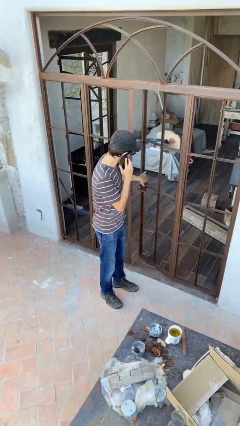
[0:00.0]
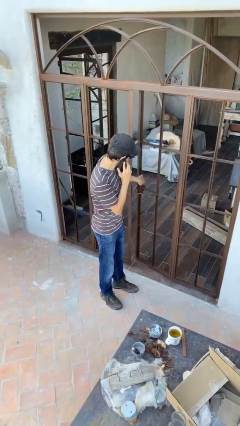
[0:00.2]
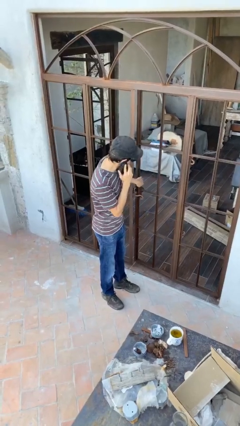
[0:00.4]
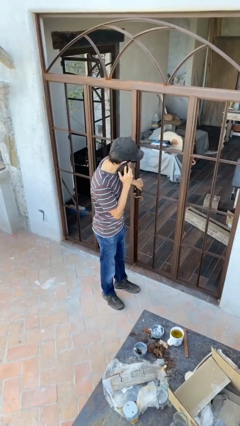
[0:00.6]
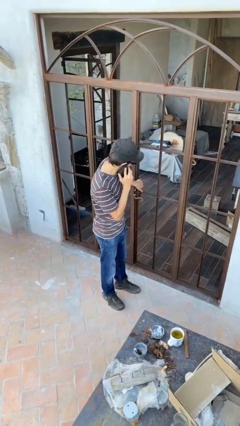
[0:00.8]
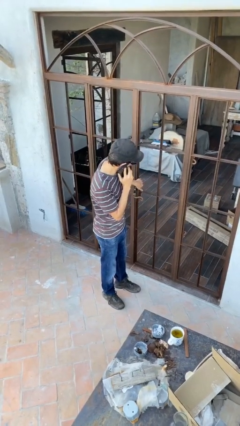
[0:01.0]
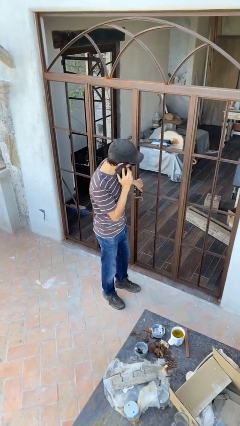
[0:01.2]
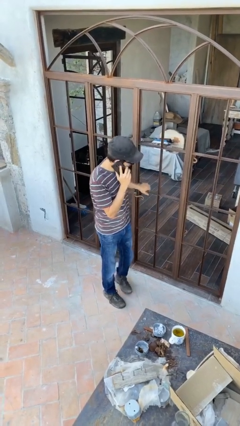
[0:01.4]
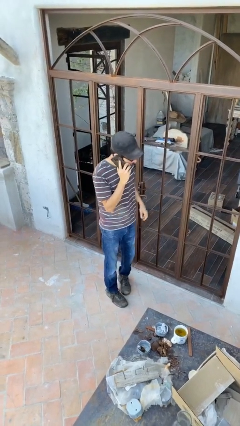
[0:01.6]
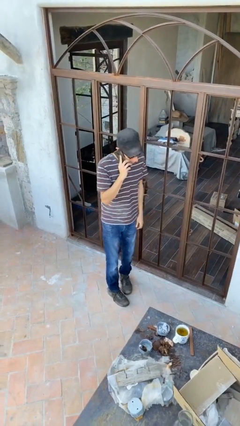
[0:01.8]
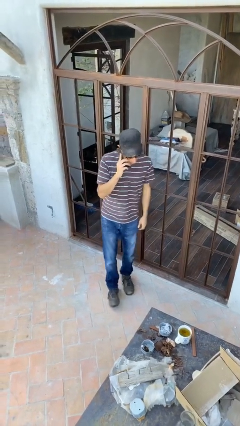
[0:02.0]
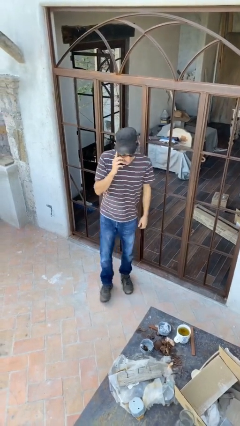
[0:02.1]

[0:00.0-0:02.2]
person closes facility door

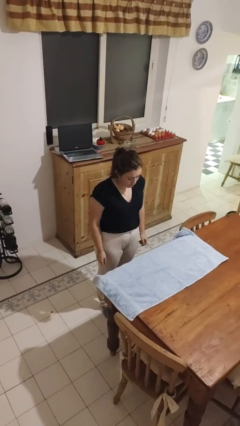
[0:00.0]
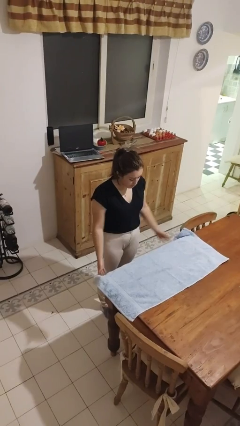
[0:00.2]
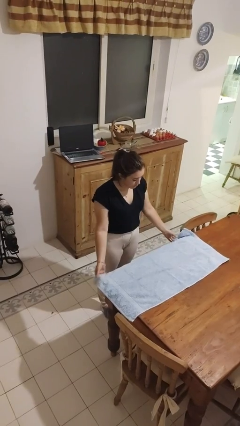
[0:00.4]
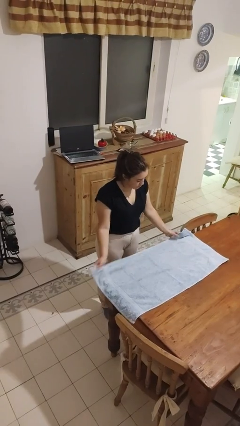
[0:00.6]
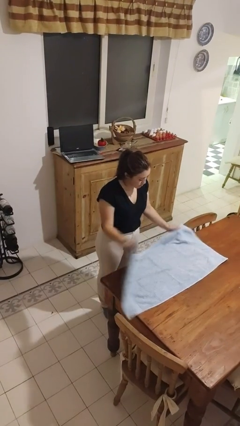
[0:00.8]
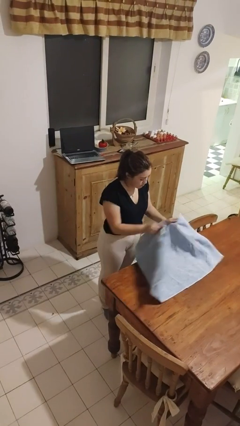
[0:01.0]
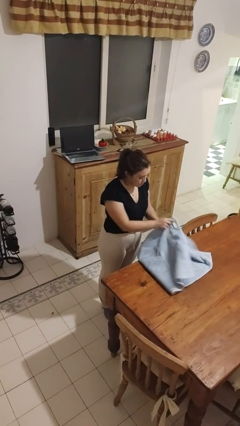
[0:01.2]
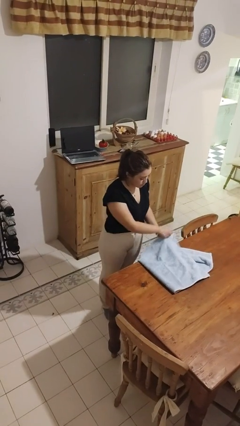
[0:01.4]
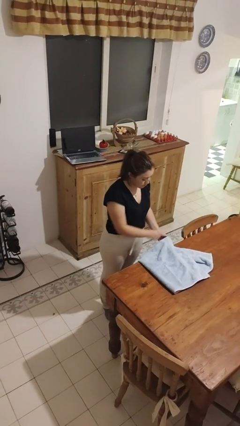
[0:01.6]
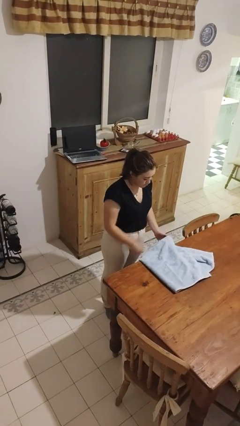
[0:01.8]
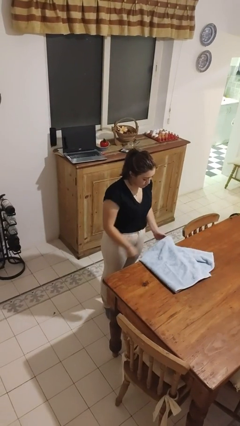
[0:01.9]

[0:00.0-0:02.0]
person folds tablecloth

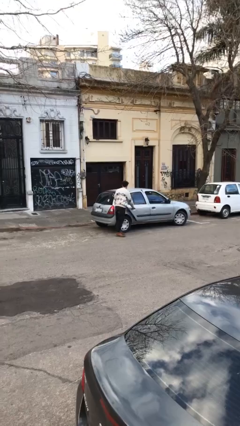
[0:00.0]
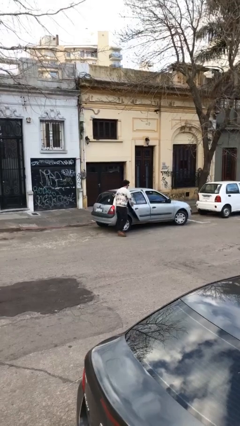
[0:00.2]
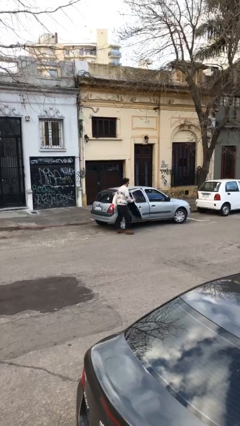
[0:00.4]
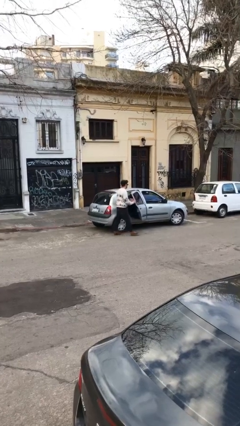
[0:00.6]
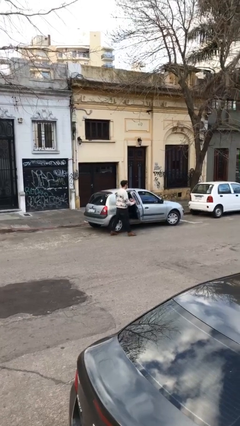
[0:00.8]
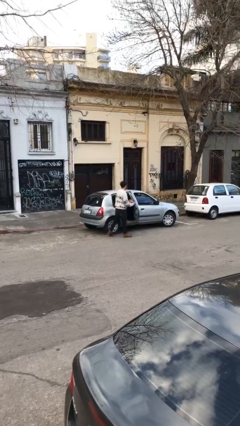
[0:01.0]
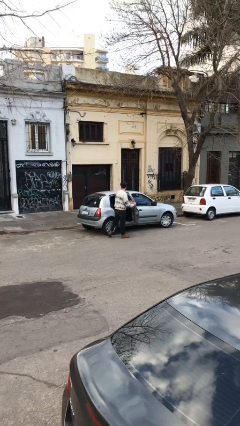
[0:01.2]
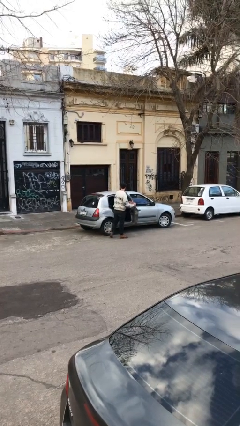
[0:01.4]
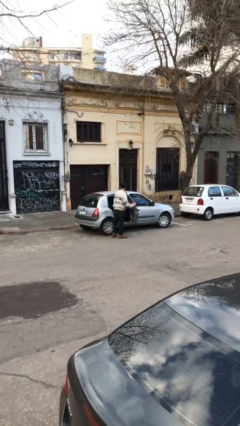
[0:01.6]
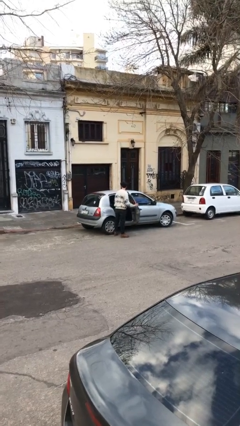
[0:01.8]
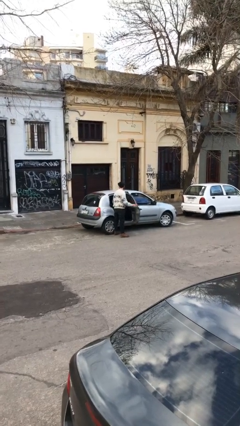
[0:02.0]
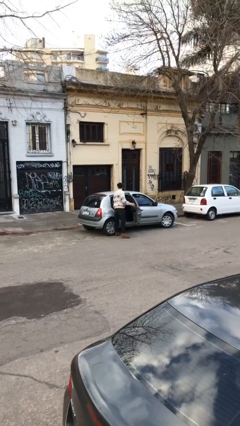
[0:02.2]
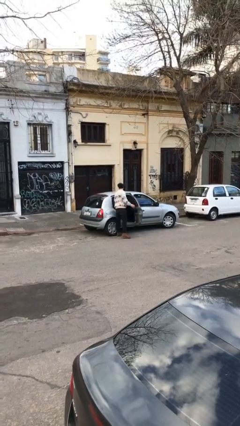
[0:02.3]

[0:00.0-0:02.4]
person opens car door

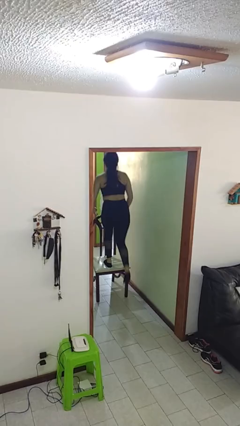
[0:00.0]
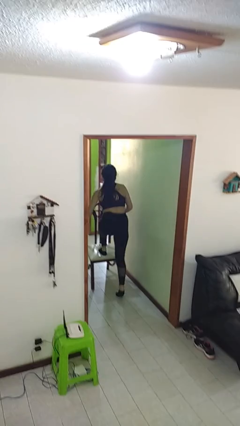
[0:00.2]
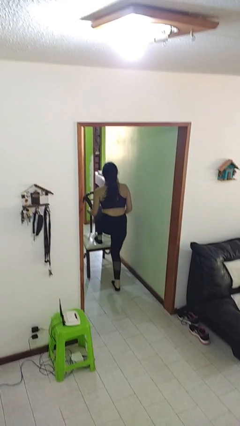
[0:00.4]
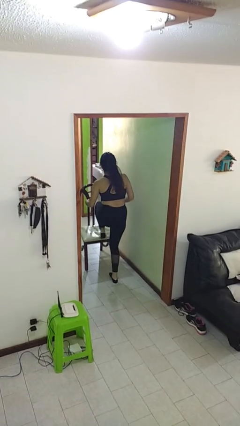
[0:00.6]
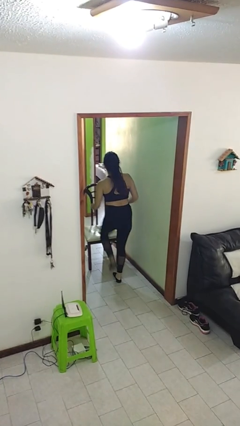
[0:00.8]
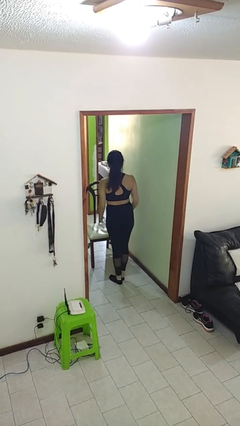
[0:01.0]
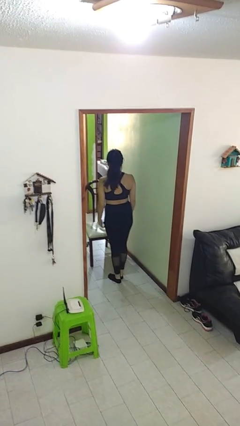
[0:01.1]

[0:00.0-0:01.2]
person climbs off chair

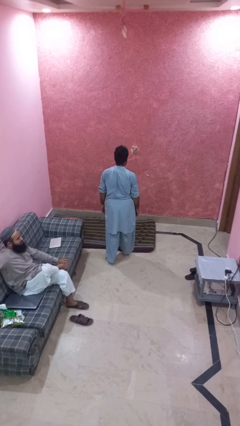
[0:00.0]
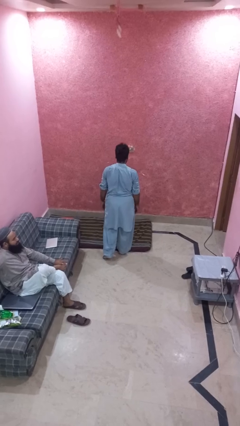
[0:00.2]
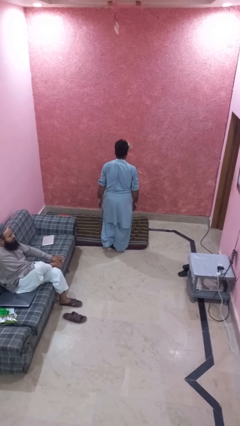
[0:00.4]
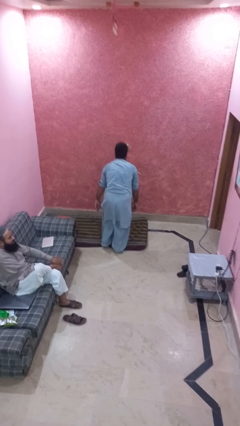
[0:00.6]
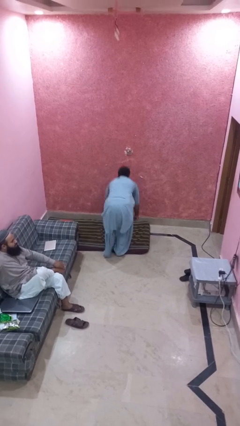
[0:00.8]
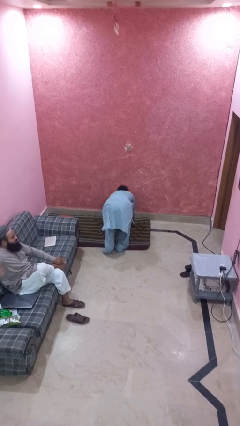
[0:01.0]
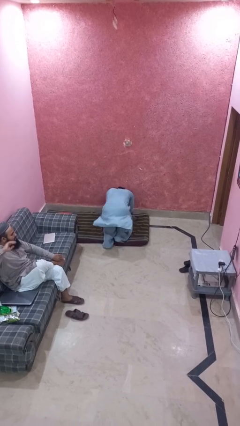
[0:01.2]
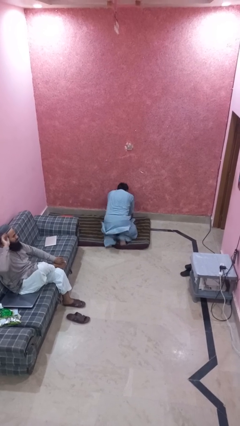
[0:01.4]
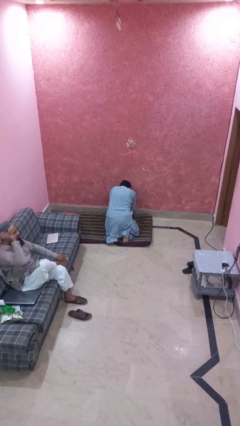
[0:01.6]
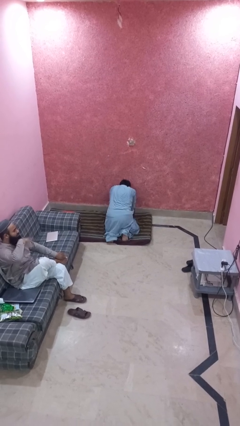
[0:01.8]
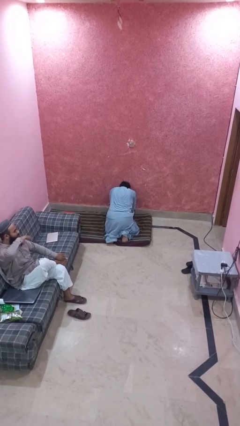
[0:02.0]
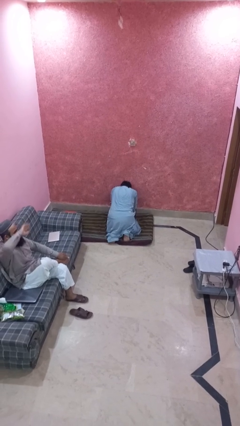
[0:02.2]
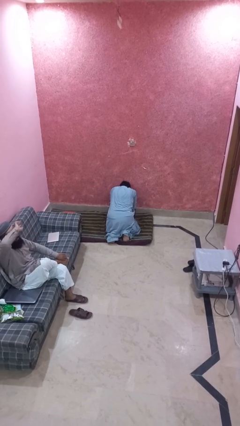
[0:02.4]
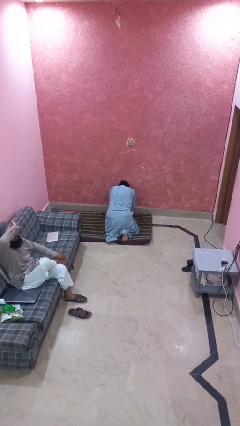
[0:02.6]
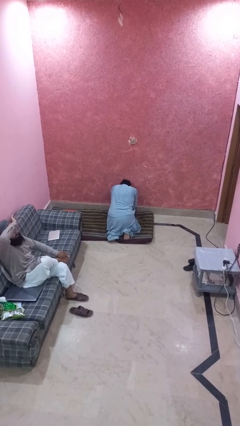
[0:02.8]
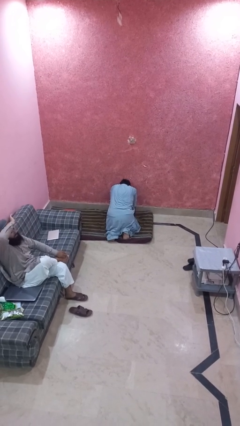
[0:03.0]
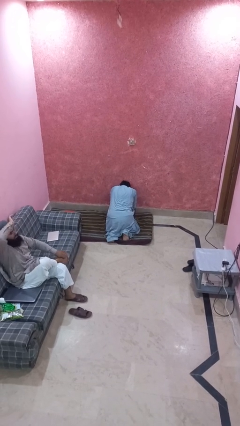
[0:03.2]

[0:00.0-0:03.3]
person trips on object on floor

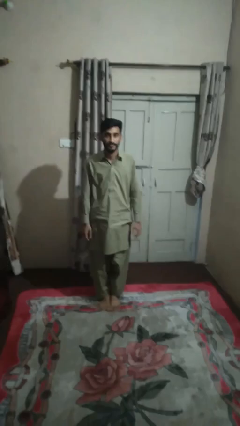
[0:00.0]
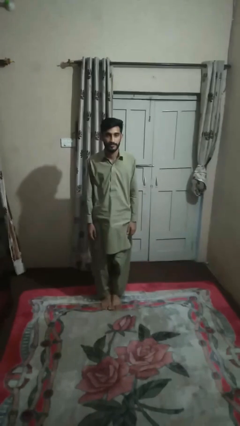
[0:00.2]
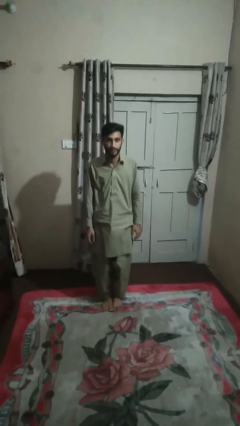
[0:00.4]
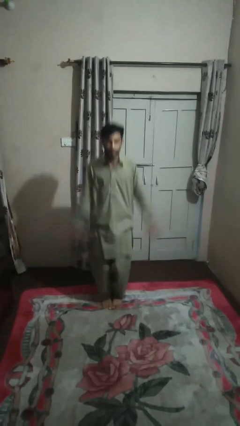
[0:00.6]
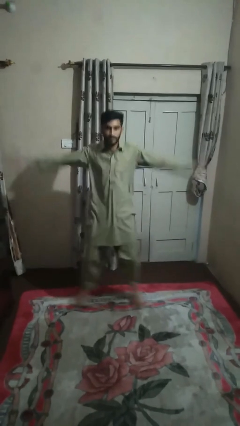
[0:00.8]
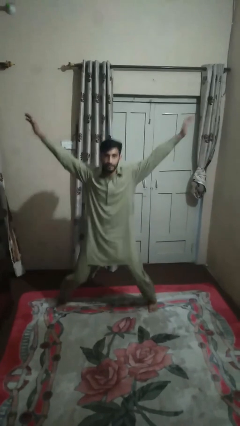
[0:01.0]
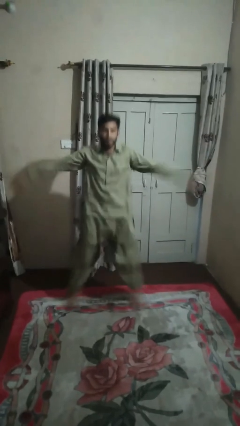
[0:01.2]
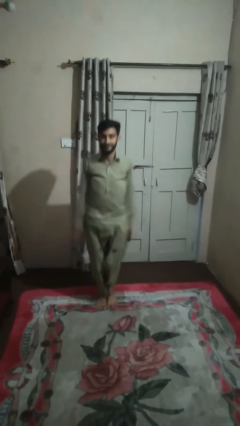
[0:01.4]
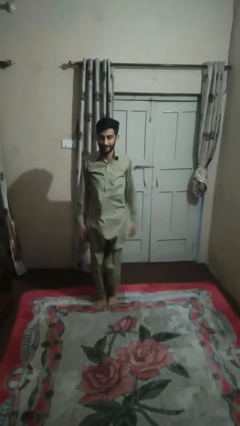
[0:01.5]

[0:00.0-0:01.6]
person exercises with jumping jacks

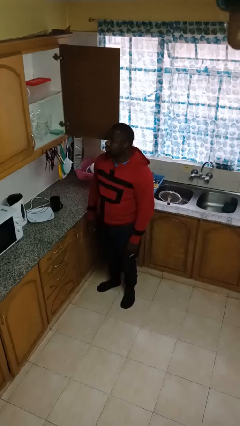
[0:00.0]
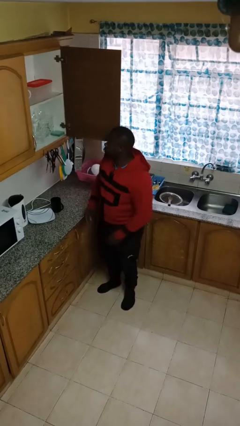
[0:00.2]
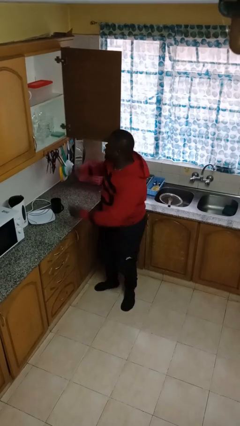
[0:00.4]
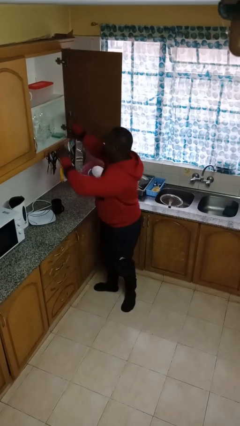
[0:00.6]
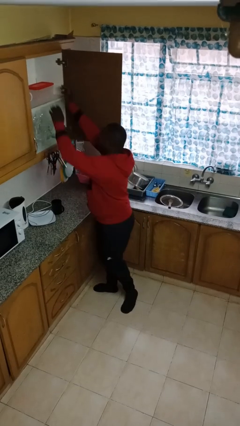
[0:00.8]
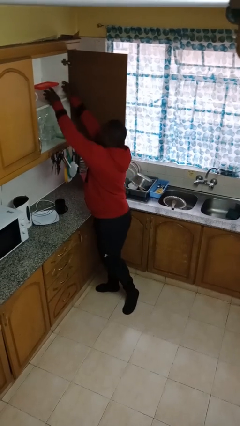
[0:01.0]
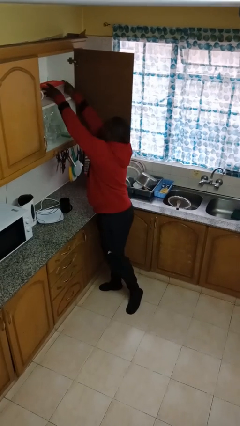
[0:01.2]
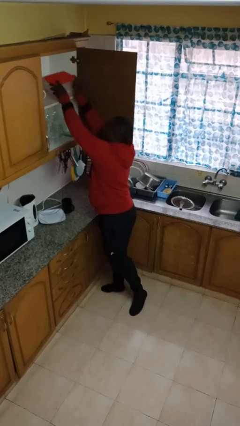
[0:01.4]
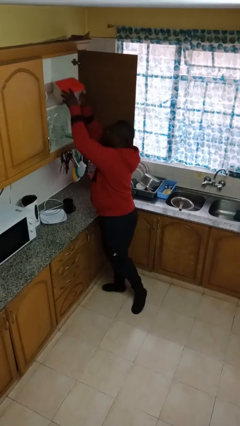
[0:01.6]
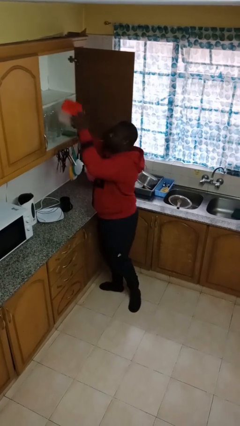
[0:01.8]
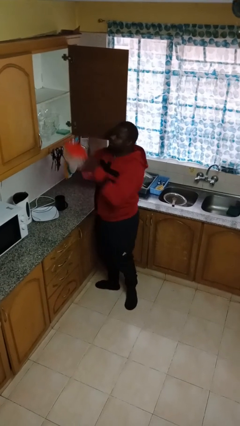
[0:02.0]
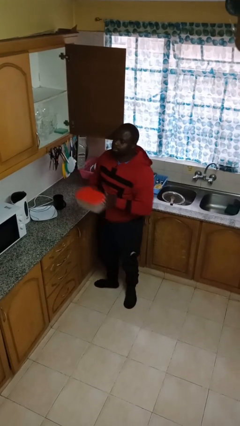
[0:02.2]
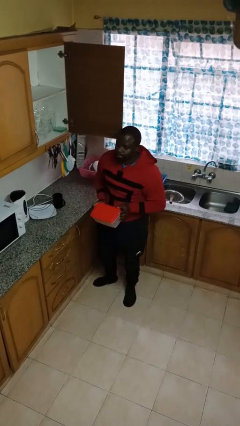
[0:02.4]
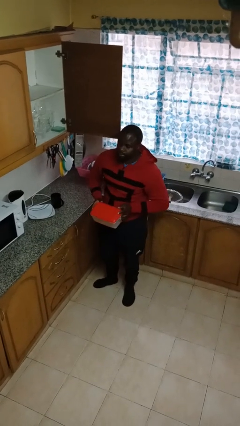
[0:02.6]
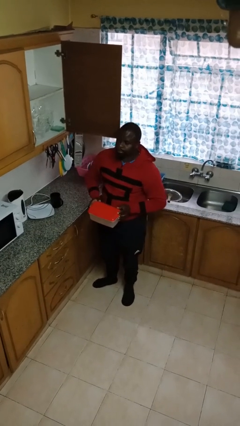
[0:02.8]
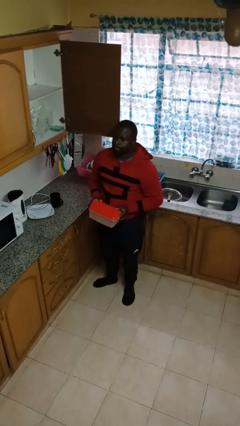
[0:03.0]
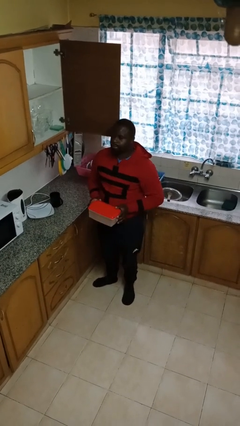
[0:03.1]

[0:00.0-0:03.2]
person picks up object from cabinet

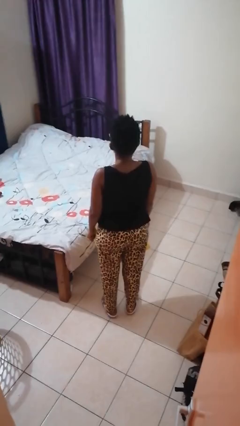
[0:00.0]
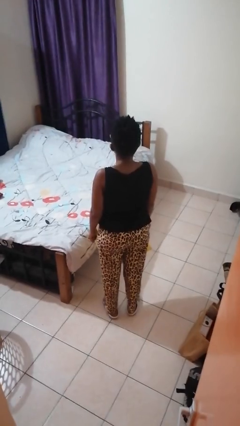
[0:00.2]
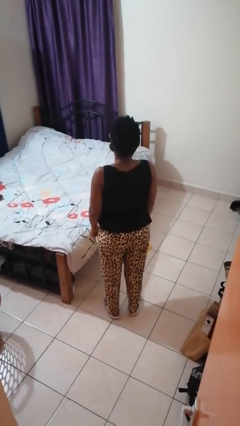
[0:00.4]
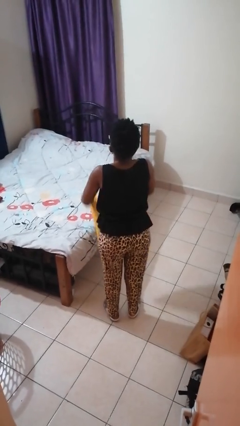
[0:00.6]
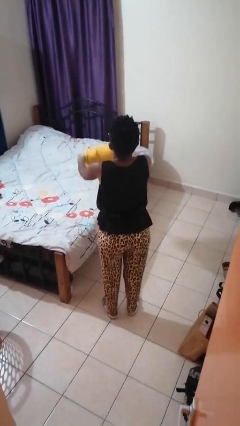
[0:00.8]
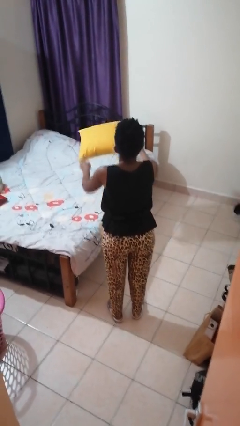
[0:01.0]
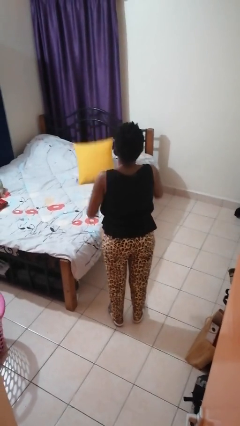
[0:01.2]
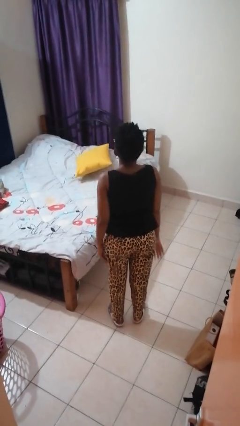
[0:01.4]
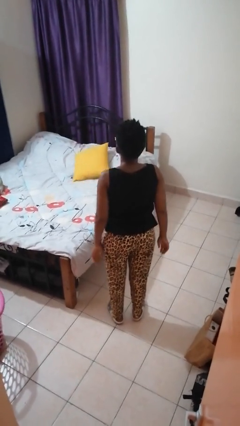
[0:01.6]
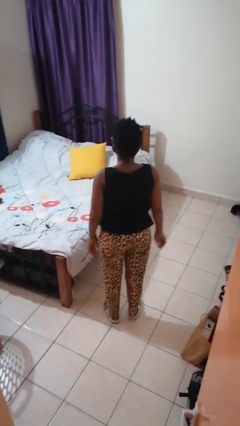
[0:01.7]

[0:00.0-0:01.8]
person throws object on bed
